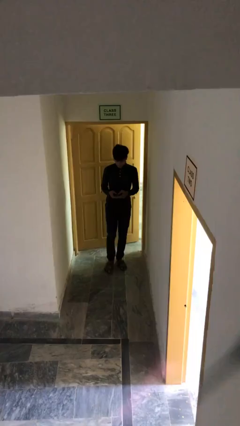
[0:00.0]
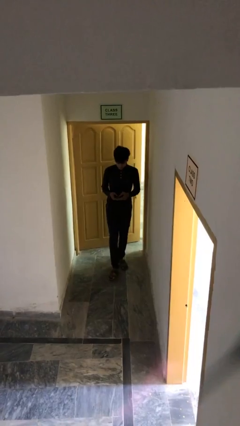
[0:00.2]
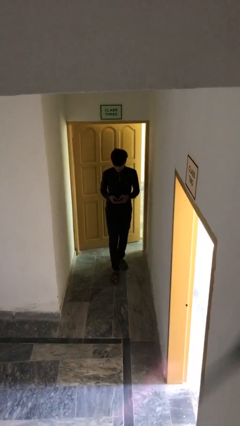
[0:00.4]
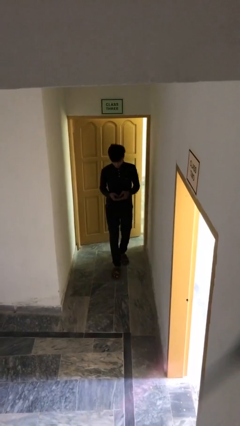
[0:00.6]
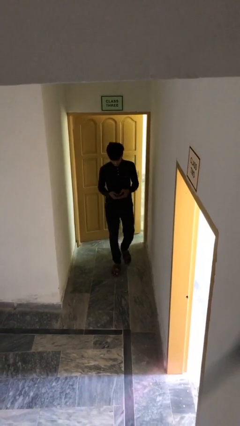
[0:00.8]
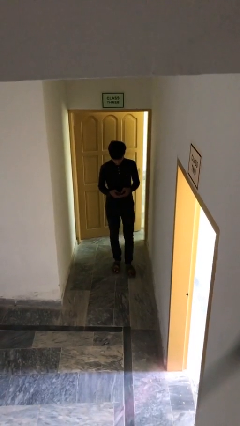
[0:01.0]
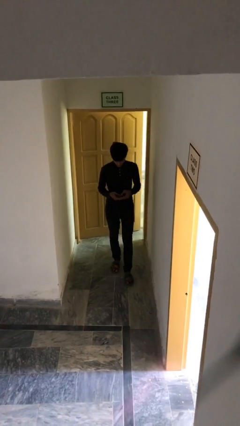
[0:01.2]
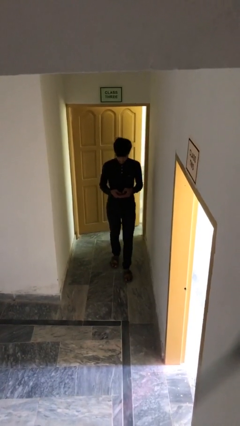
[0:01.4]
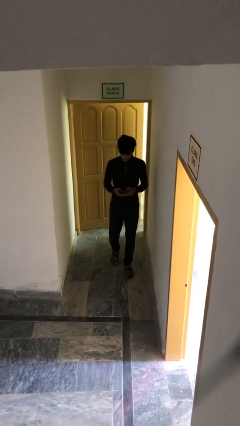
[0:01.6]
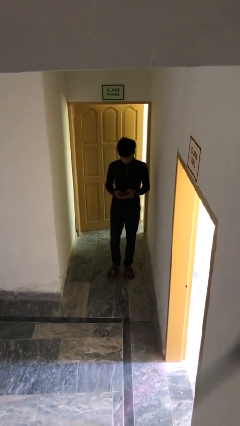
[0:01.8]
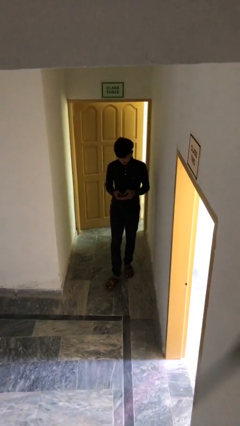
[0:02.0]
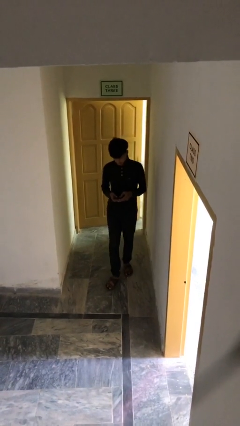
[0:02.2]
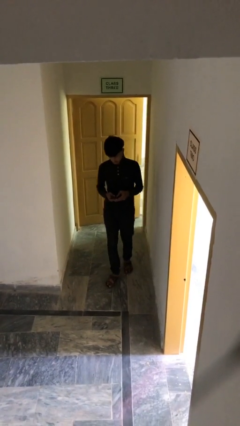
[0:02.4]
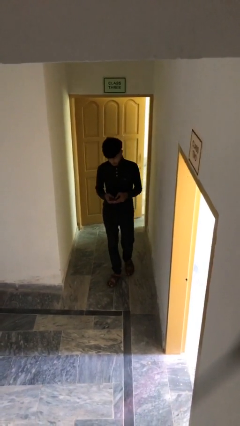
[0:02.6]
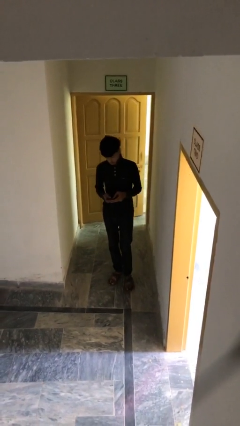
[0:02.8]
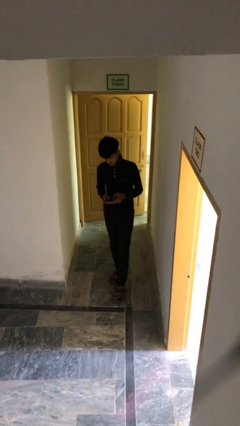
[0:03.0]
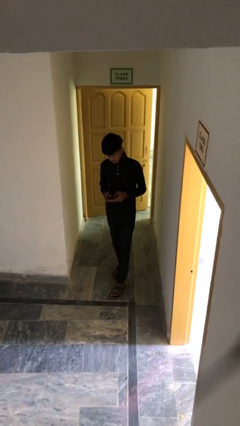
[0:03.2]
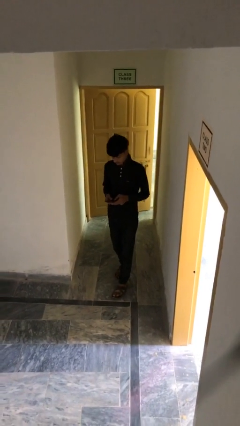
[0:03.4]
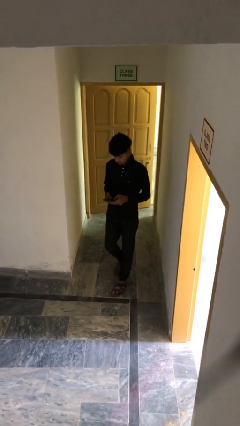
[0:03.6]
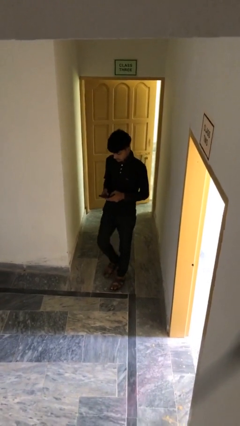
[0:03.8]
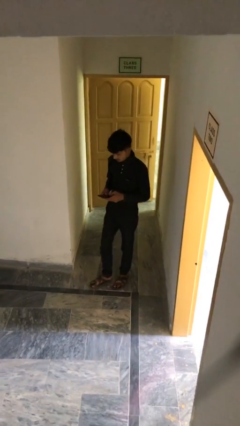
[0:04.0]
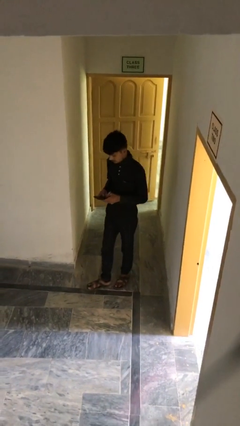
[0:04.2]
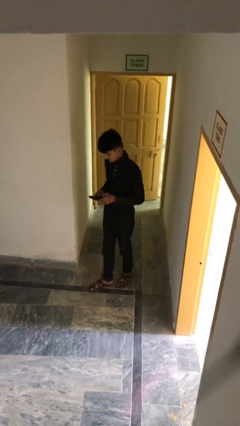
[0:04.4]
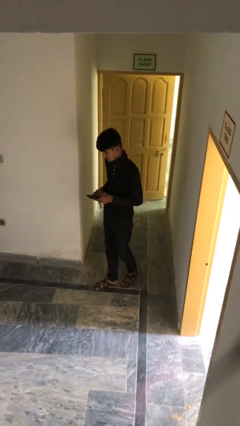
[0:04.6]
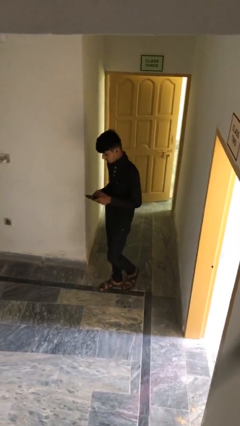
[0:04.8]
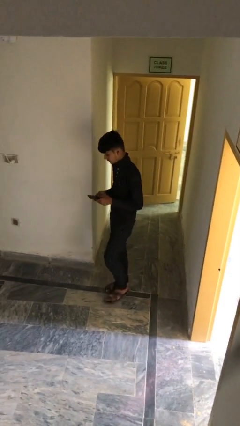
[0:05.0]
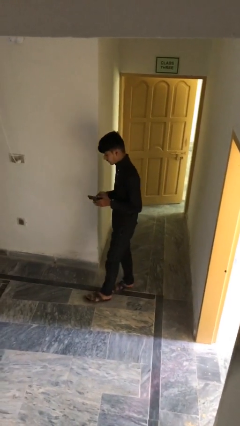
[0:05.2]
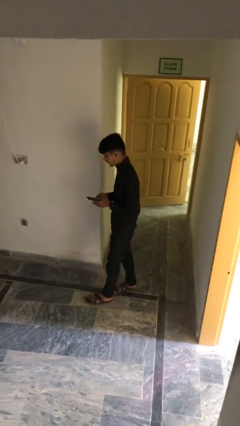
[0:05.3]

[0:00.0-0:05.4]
person texts on phone

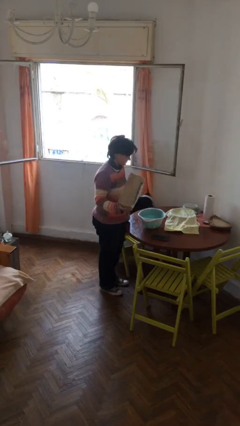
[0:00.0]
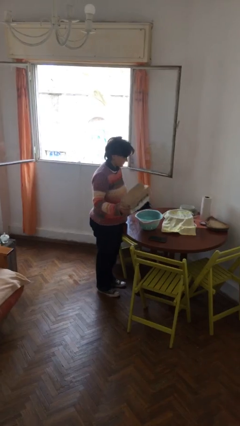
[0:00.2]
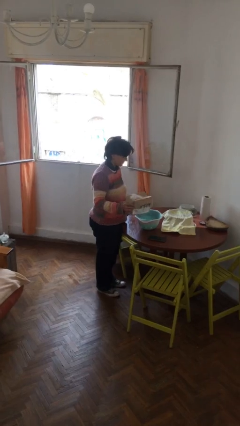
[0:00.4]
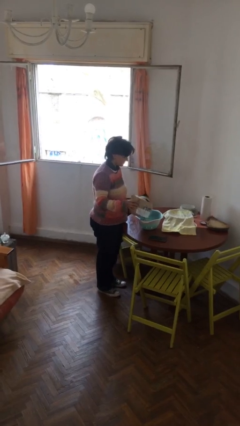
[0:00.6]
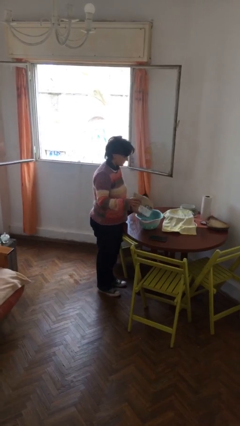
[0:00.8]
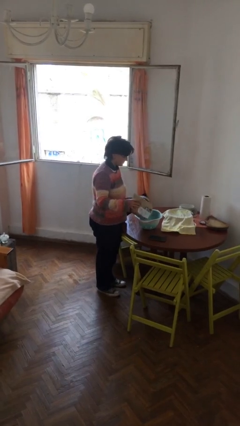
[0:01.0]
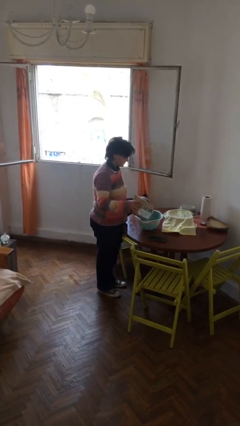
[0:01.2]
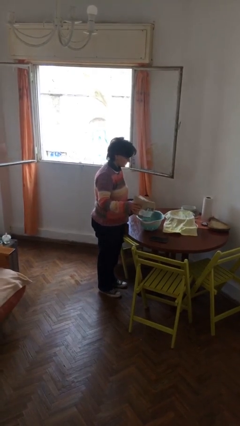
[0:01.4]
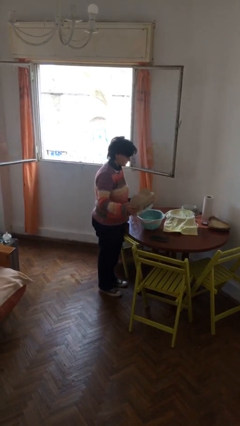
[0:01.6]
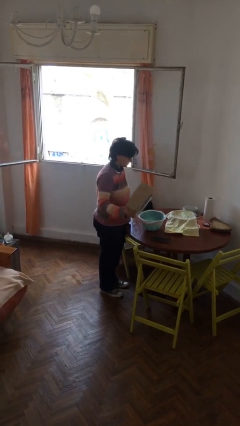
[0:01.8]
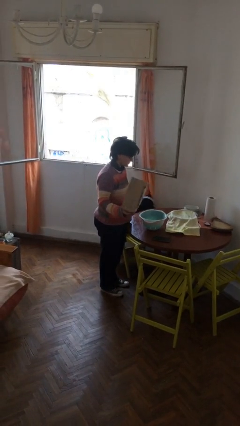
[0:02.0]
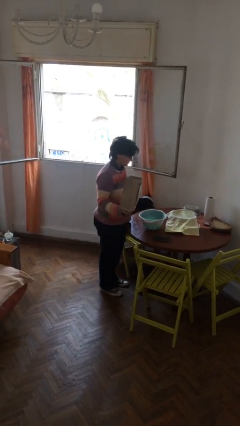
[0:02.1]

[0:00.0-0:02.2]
person pours into bowl

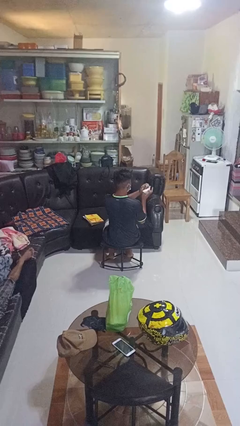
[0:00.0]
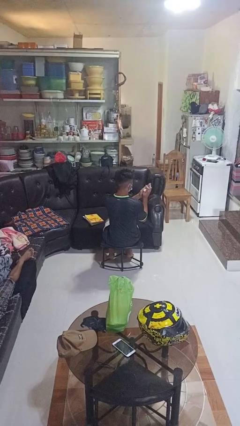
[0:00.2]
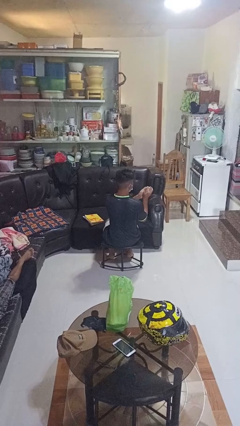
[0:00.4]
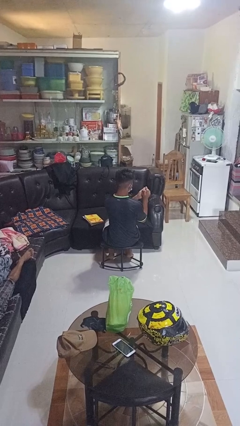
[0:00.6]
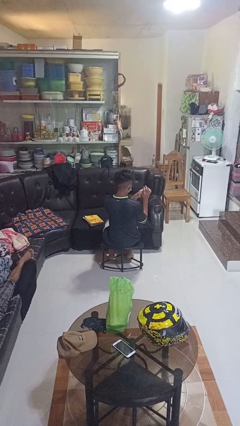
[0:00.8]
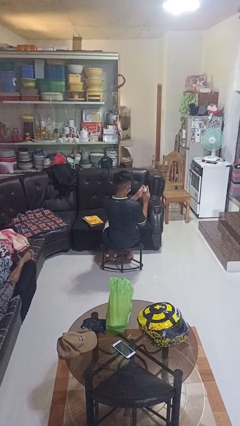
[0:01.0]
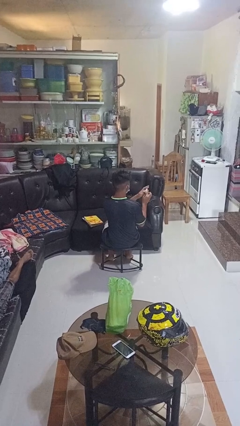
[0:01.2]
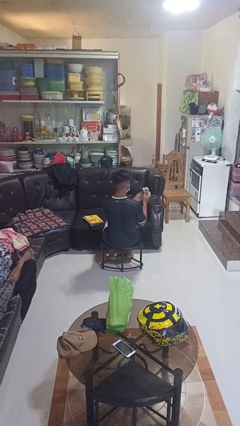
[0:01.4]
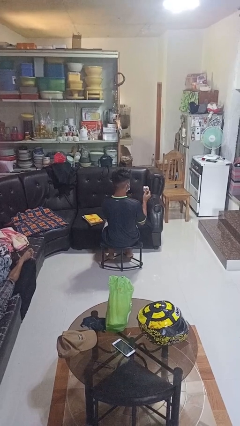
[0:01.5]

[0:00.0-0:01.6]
person crumples paper

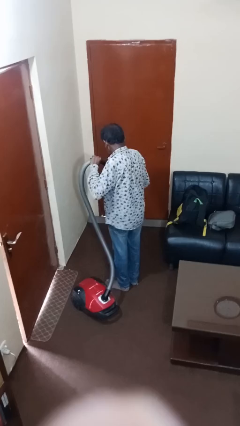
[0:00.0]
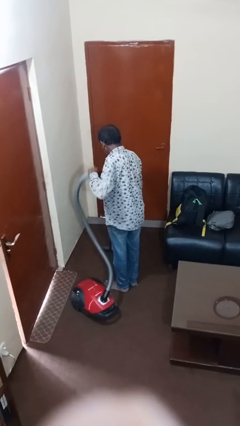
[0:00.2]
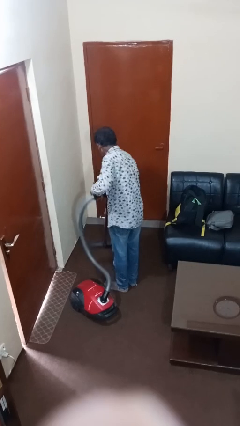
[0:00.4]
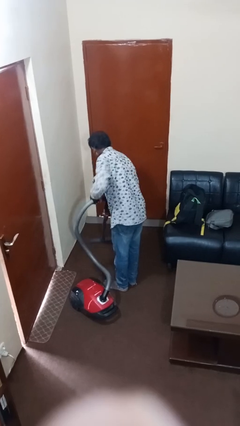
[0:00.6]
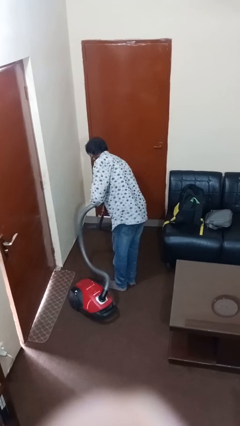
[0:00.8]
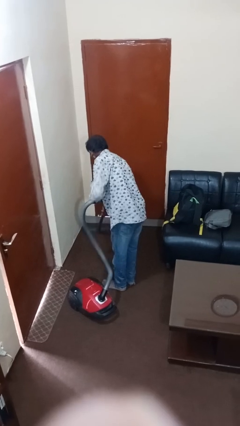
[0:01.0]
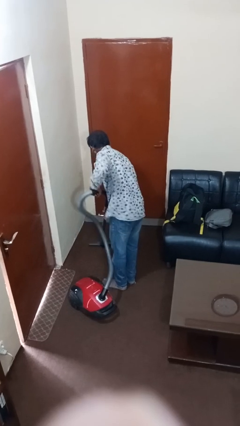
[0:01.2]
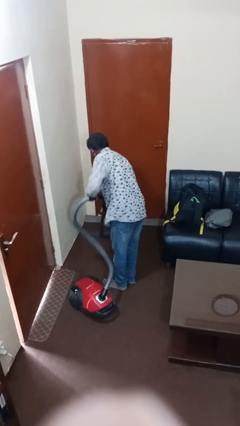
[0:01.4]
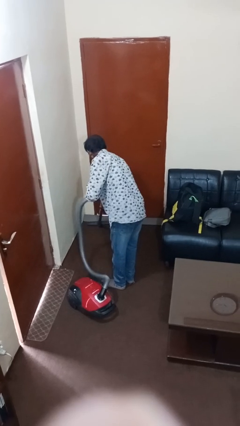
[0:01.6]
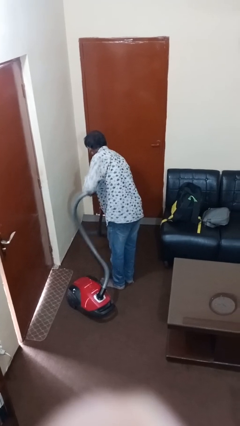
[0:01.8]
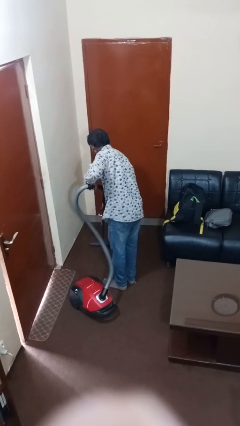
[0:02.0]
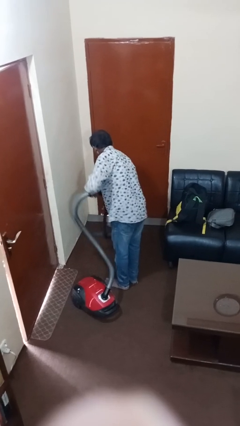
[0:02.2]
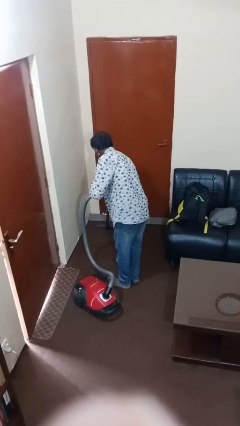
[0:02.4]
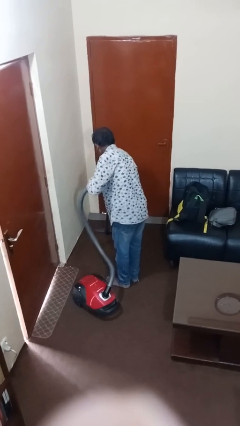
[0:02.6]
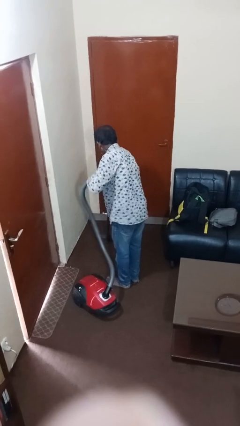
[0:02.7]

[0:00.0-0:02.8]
person vacuums carpet

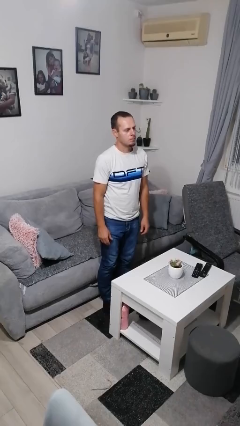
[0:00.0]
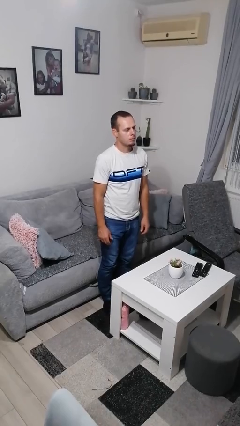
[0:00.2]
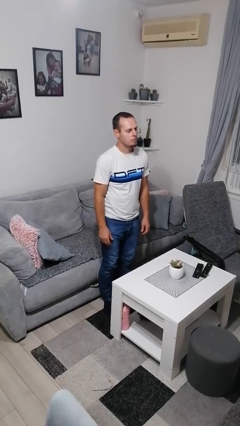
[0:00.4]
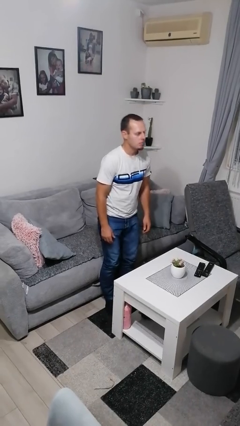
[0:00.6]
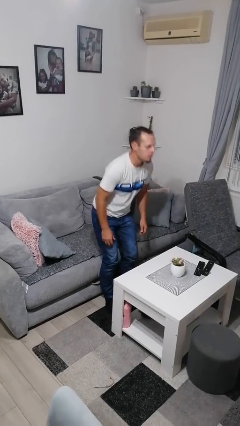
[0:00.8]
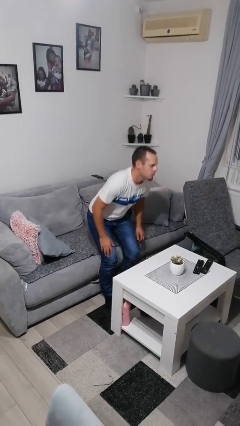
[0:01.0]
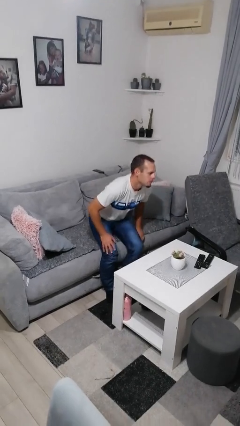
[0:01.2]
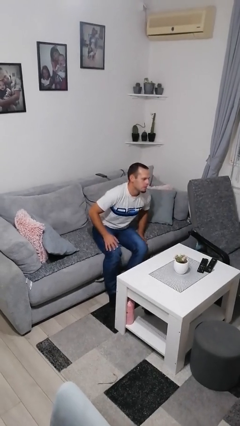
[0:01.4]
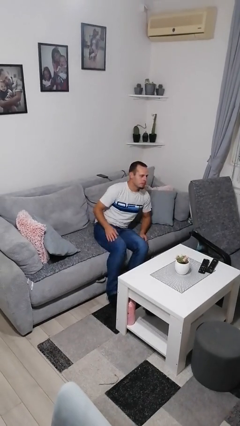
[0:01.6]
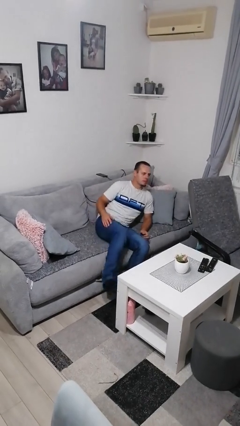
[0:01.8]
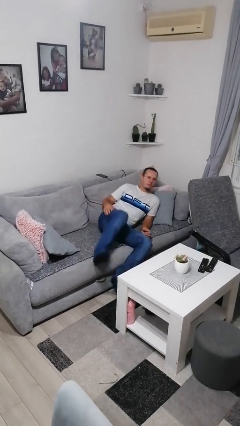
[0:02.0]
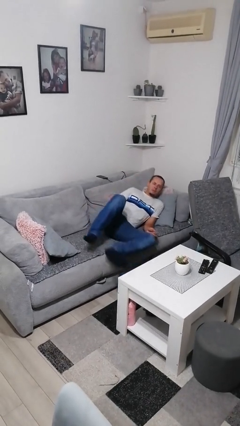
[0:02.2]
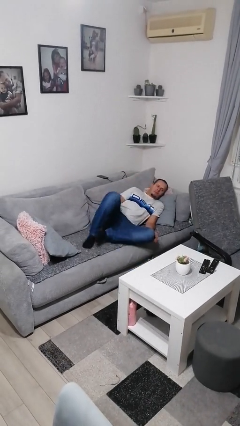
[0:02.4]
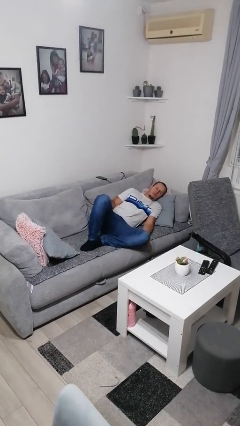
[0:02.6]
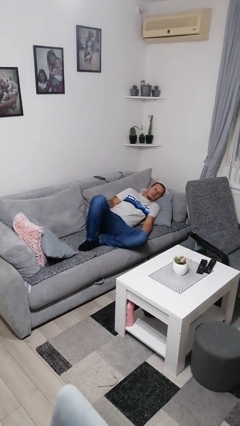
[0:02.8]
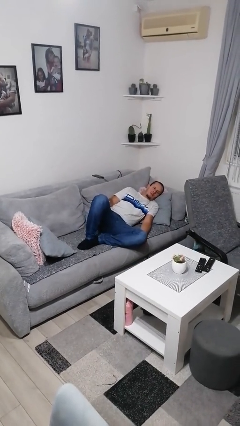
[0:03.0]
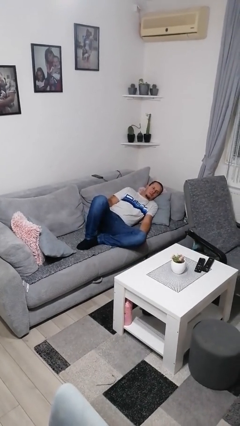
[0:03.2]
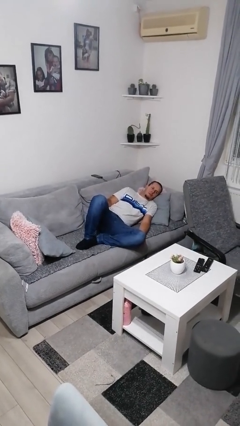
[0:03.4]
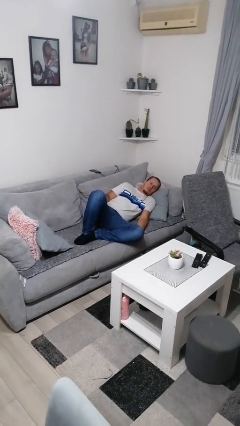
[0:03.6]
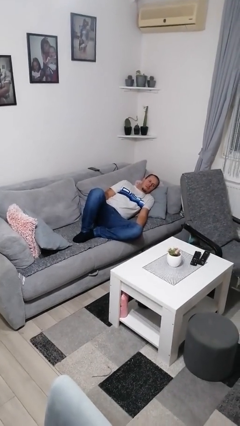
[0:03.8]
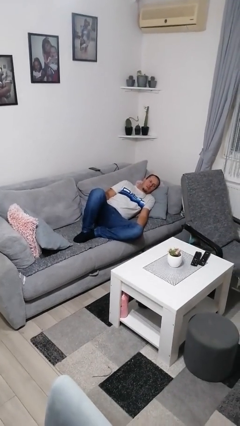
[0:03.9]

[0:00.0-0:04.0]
person lies down on couch

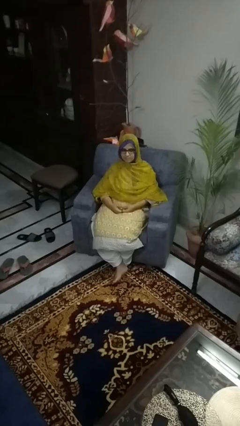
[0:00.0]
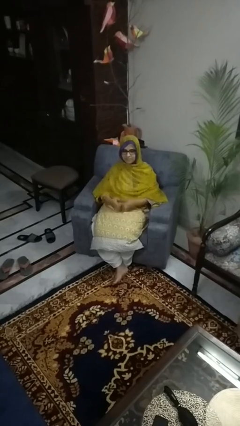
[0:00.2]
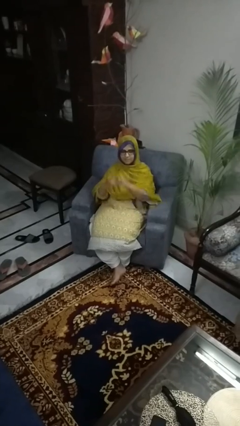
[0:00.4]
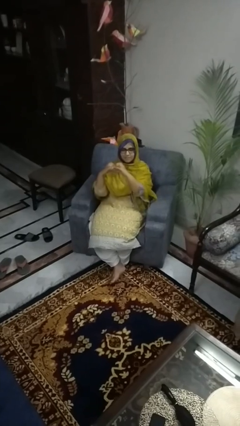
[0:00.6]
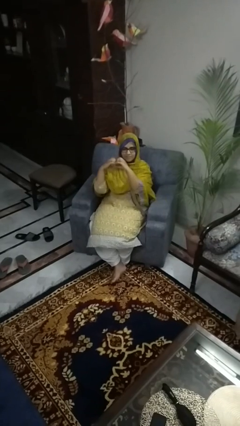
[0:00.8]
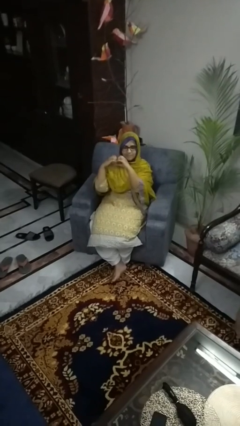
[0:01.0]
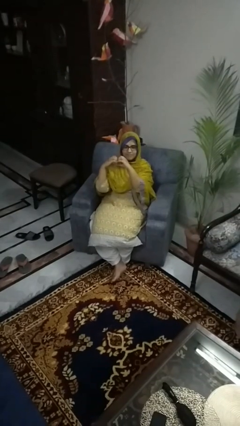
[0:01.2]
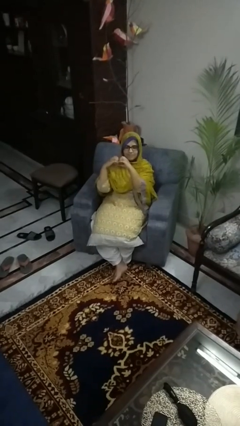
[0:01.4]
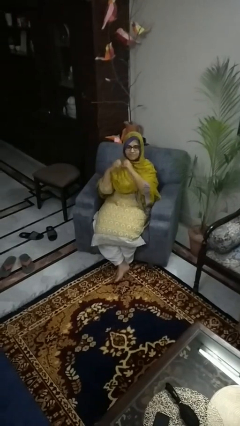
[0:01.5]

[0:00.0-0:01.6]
person gestures heart

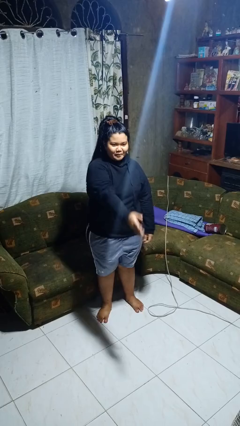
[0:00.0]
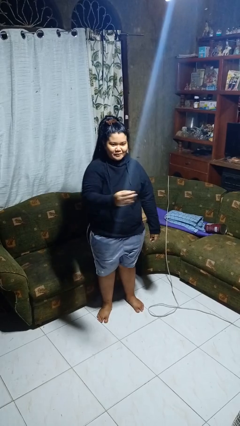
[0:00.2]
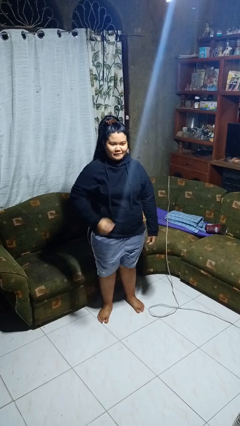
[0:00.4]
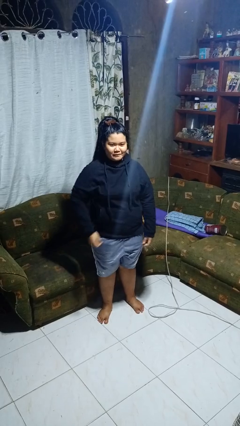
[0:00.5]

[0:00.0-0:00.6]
person karate chop
